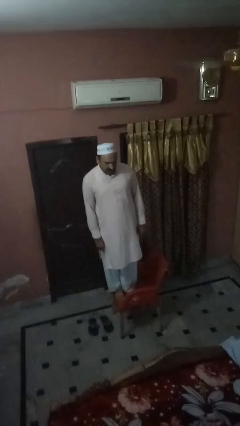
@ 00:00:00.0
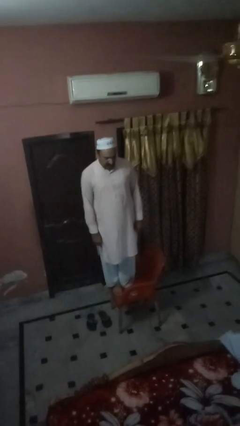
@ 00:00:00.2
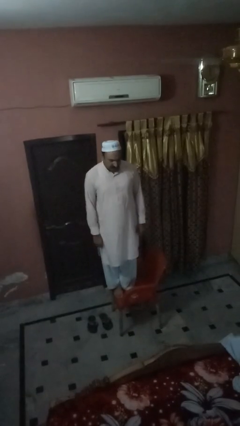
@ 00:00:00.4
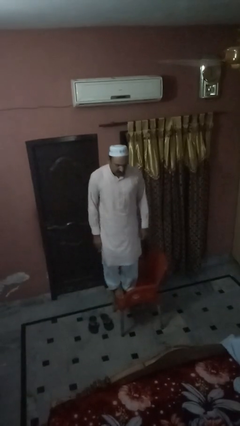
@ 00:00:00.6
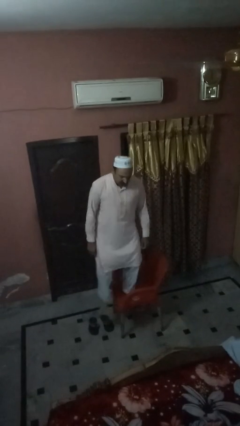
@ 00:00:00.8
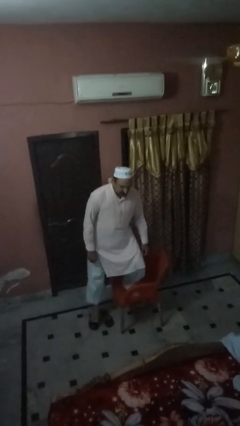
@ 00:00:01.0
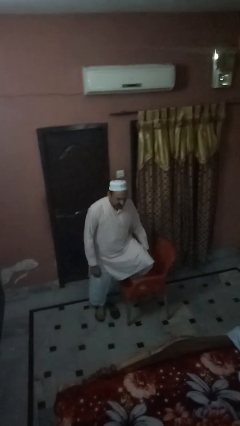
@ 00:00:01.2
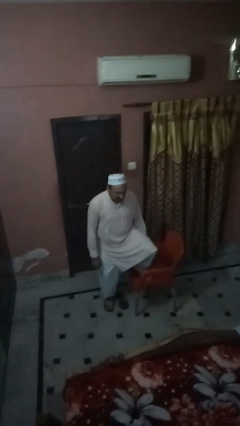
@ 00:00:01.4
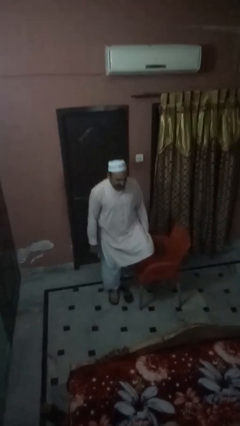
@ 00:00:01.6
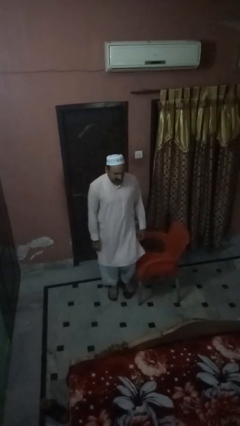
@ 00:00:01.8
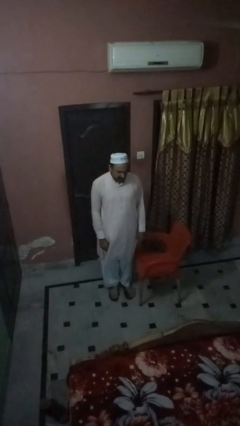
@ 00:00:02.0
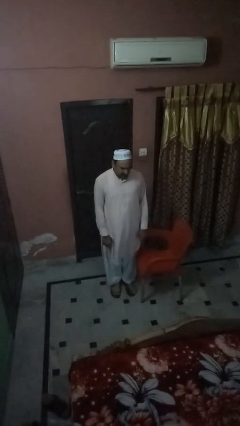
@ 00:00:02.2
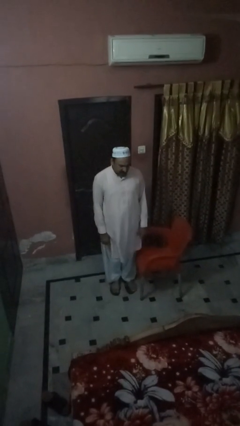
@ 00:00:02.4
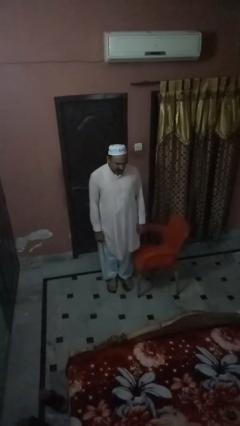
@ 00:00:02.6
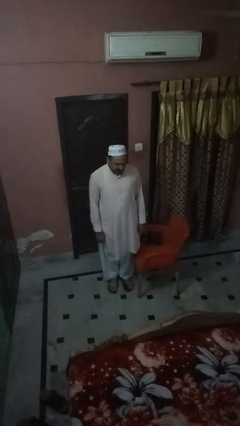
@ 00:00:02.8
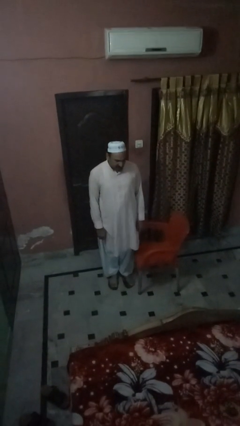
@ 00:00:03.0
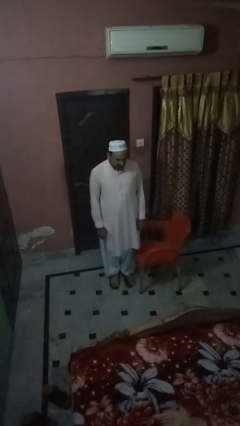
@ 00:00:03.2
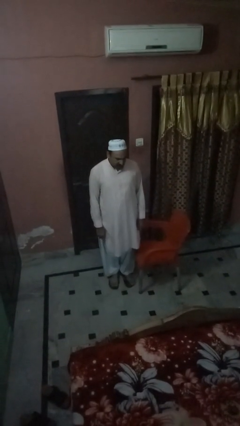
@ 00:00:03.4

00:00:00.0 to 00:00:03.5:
person climbs off chair

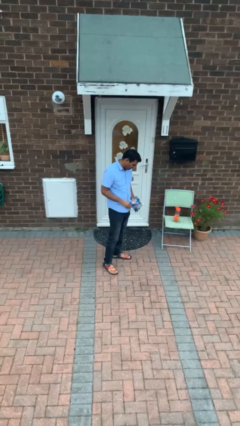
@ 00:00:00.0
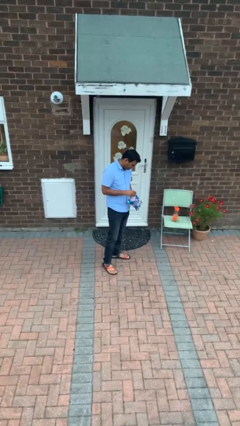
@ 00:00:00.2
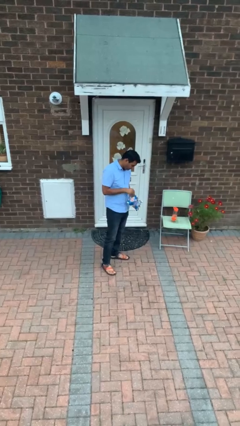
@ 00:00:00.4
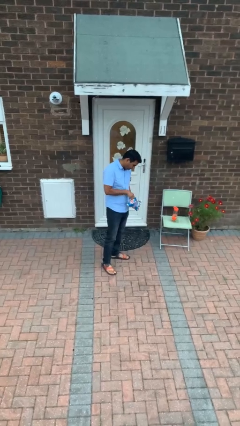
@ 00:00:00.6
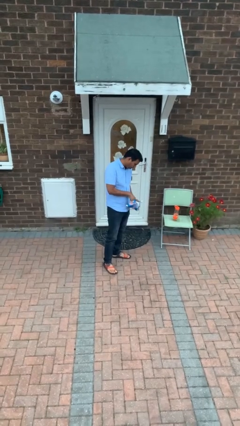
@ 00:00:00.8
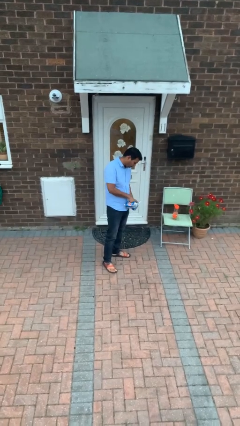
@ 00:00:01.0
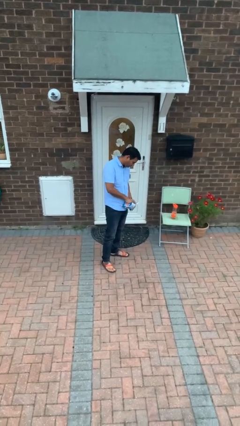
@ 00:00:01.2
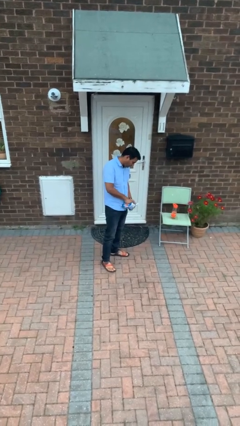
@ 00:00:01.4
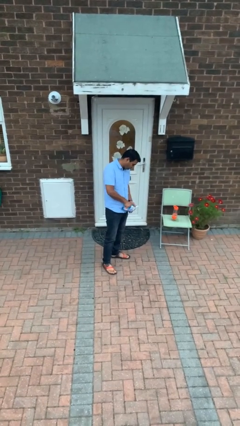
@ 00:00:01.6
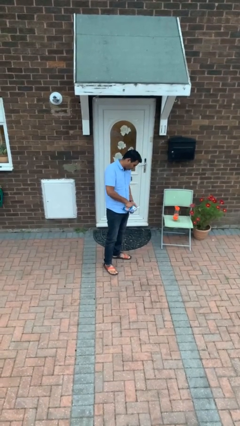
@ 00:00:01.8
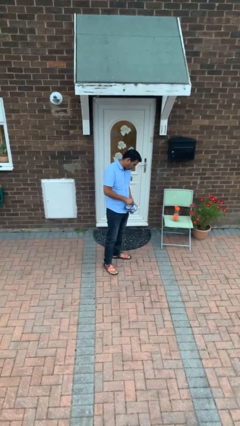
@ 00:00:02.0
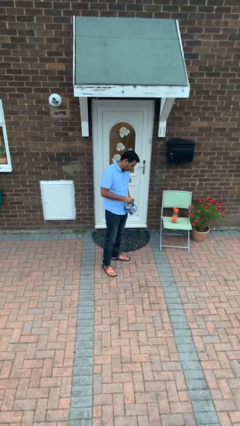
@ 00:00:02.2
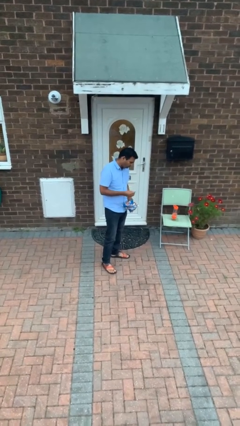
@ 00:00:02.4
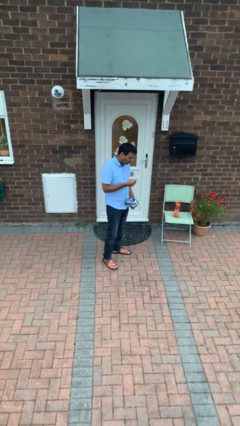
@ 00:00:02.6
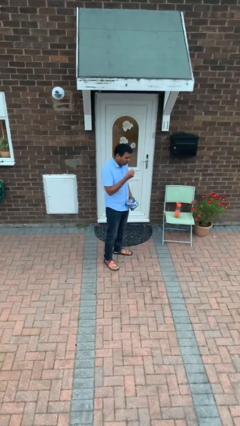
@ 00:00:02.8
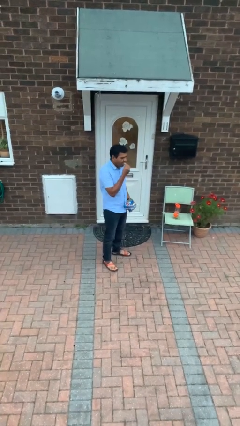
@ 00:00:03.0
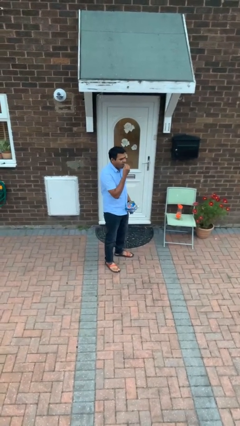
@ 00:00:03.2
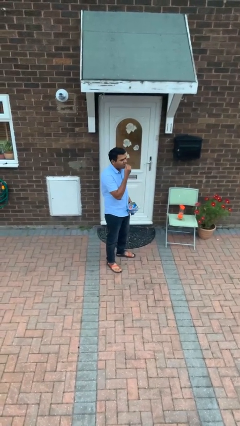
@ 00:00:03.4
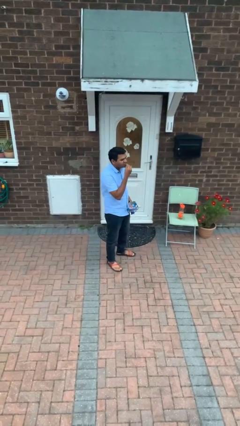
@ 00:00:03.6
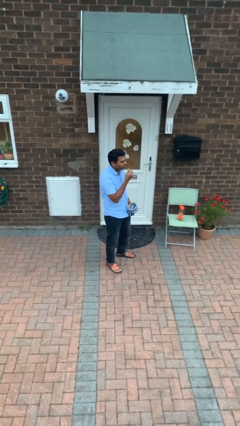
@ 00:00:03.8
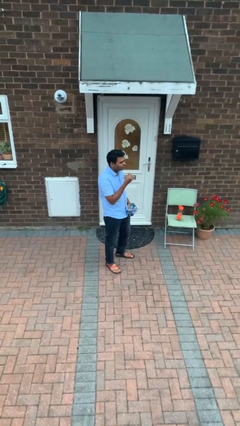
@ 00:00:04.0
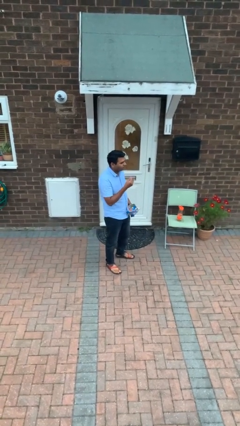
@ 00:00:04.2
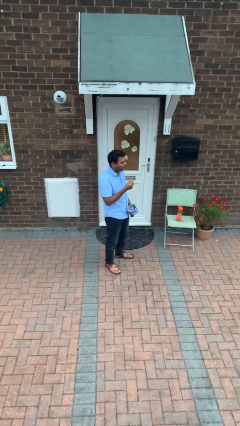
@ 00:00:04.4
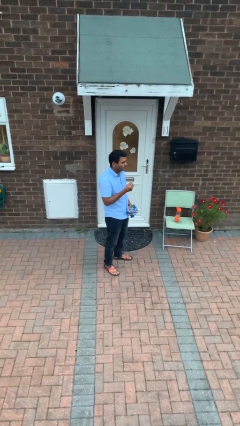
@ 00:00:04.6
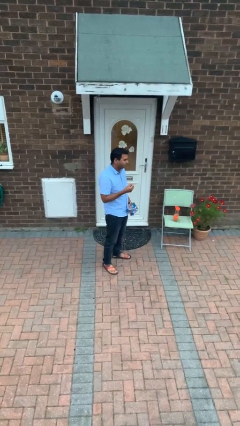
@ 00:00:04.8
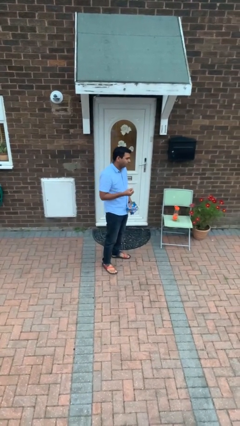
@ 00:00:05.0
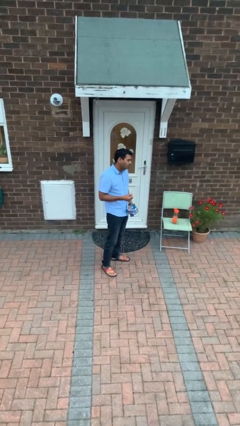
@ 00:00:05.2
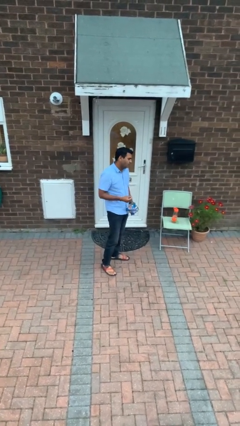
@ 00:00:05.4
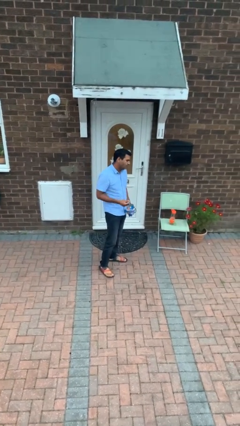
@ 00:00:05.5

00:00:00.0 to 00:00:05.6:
person eats snack from bag

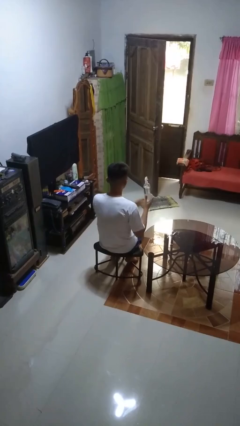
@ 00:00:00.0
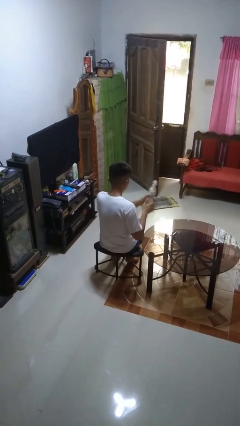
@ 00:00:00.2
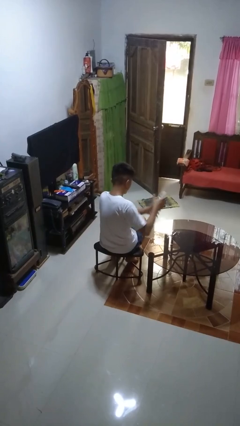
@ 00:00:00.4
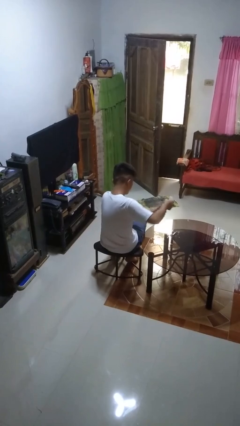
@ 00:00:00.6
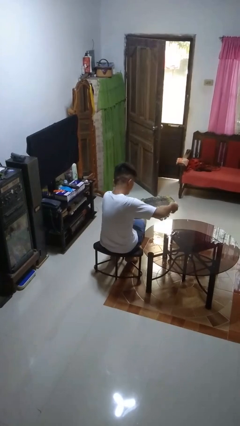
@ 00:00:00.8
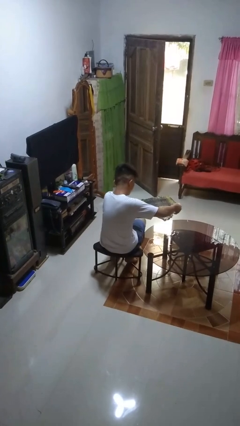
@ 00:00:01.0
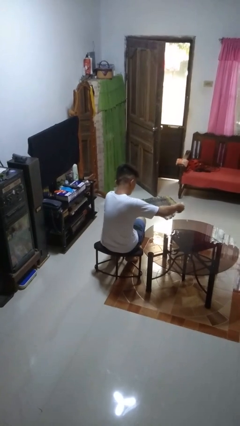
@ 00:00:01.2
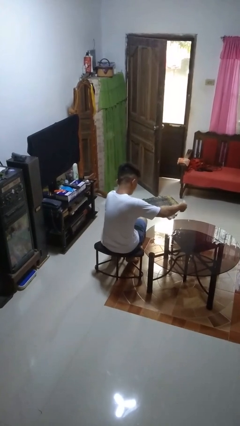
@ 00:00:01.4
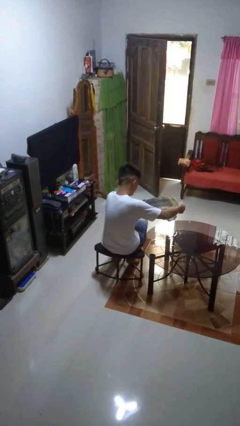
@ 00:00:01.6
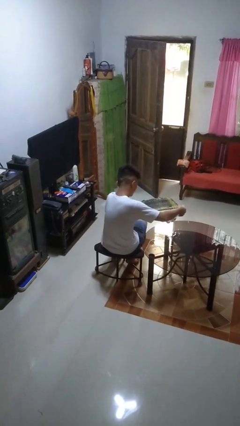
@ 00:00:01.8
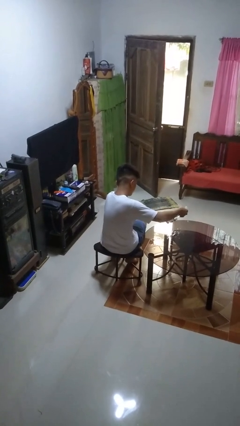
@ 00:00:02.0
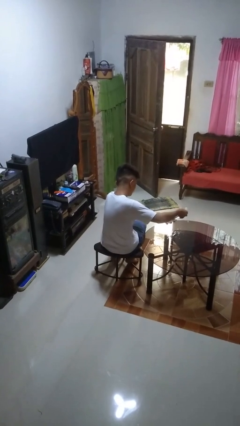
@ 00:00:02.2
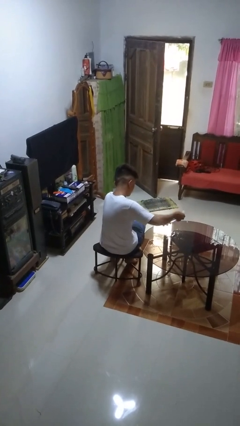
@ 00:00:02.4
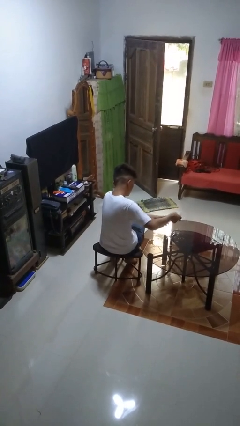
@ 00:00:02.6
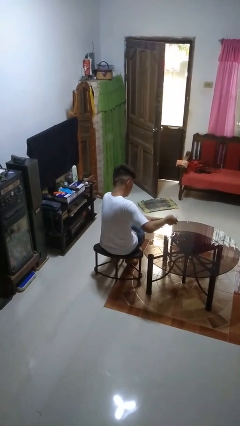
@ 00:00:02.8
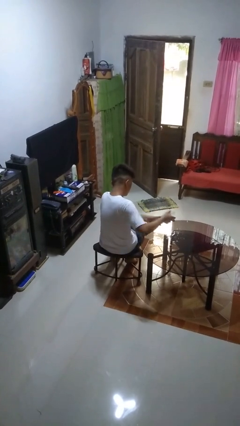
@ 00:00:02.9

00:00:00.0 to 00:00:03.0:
person sprays from bottle

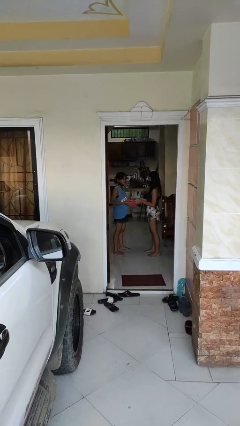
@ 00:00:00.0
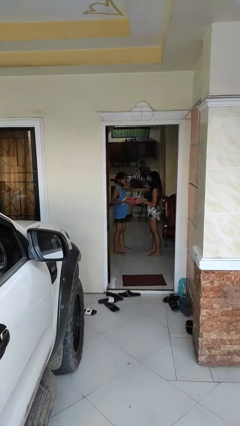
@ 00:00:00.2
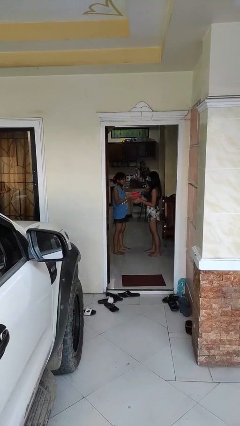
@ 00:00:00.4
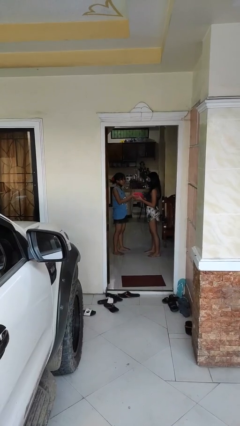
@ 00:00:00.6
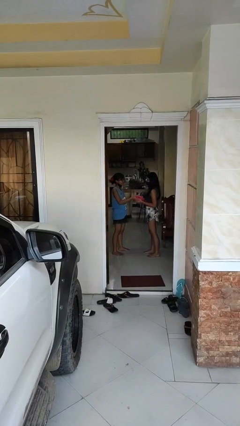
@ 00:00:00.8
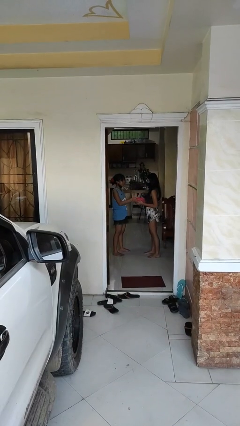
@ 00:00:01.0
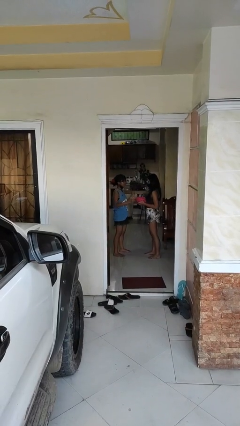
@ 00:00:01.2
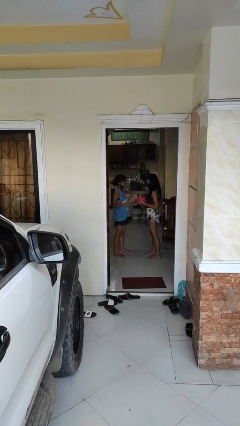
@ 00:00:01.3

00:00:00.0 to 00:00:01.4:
person transfers object to person

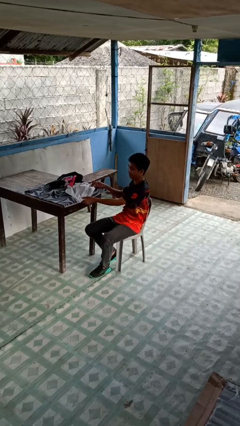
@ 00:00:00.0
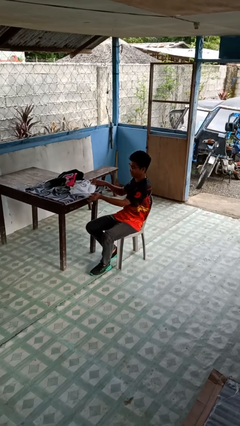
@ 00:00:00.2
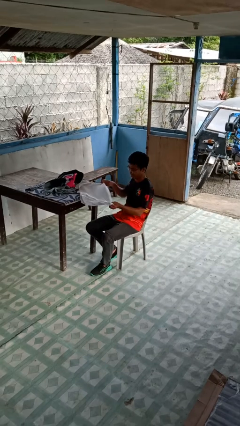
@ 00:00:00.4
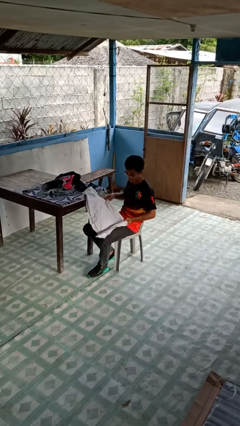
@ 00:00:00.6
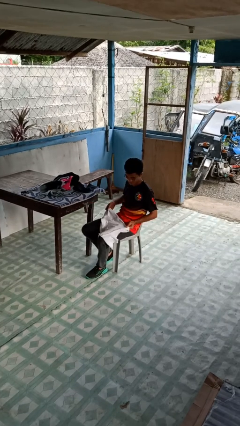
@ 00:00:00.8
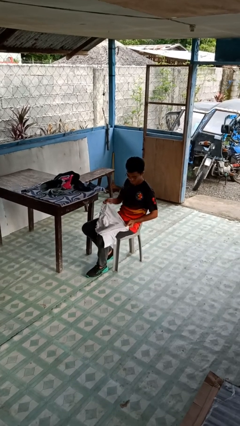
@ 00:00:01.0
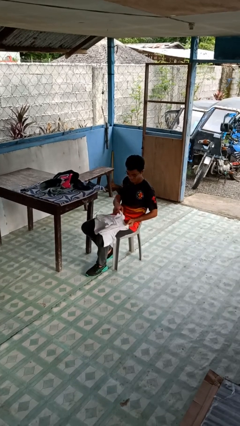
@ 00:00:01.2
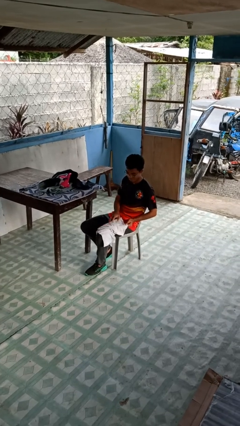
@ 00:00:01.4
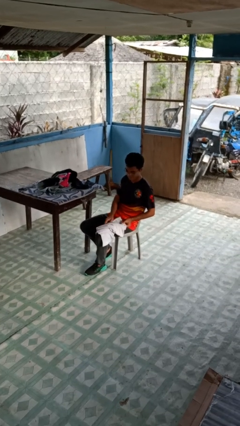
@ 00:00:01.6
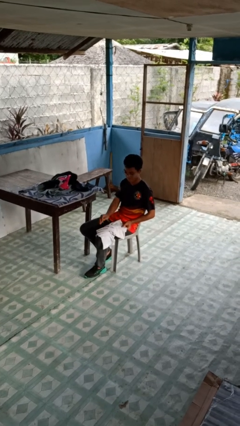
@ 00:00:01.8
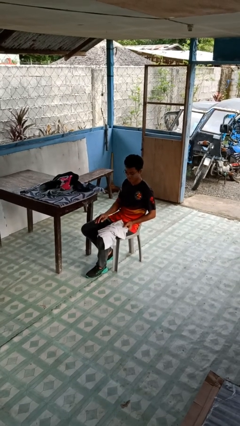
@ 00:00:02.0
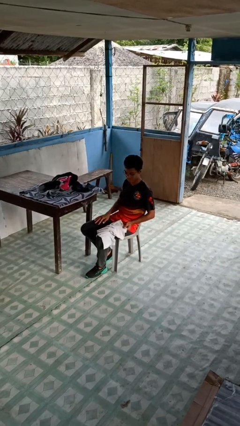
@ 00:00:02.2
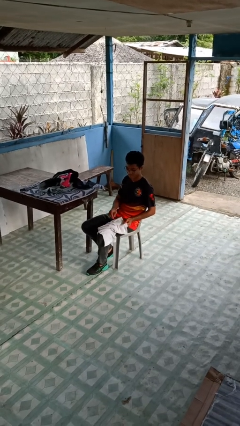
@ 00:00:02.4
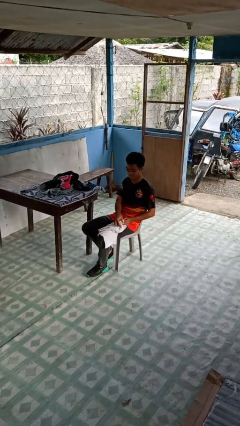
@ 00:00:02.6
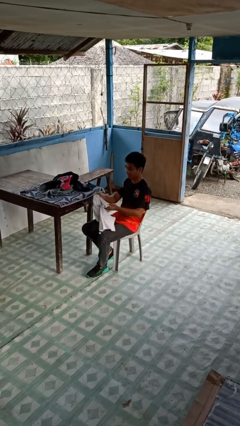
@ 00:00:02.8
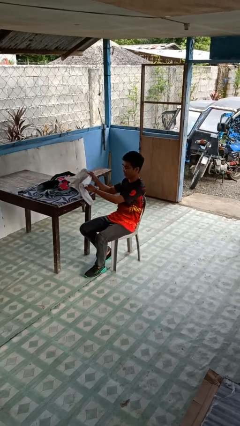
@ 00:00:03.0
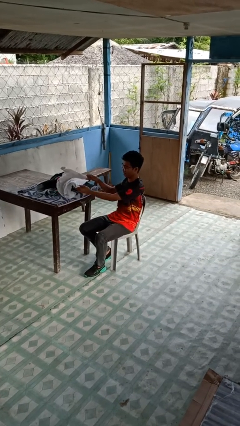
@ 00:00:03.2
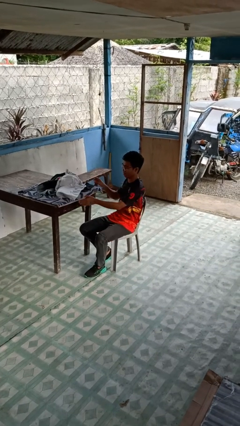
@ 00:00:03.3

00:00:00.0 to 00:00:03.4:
person folds shirt

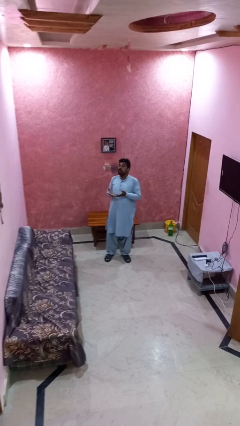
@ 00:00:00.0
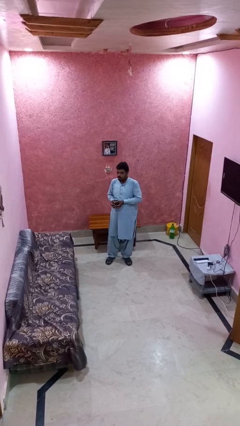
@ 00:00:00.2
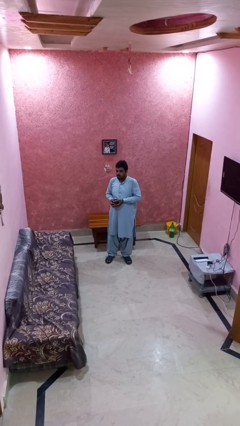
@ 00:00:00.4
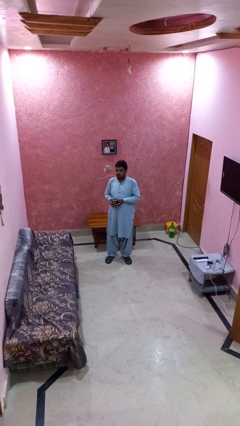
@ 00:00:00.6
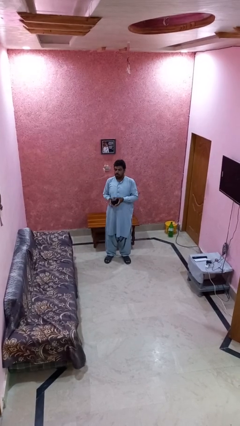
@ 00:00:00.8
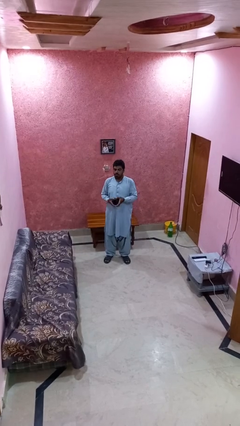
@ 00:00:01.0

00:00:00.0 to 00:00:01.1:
person catches dropped object
